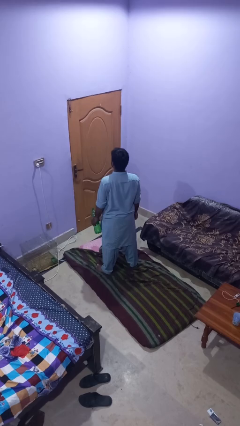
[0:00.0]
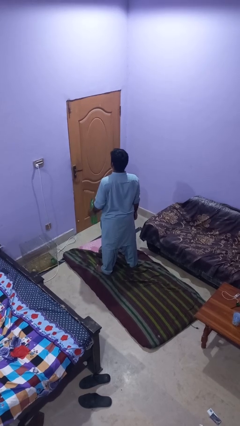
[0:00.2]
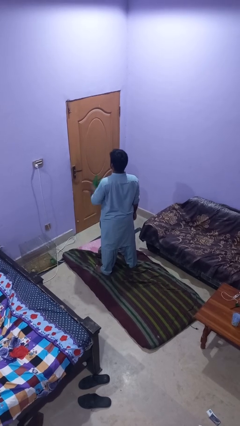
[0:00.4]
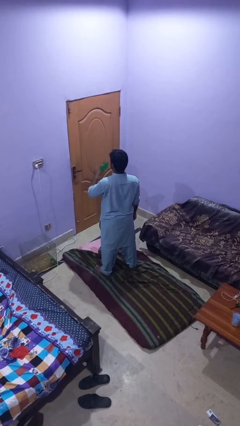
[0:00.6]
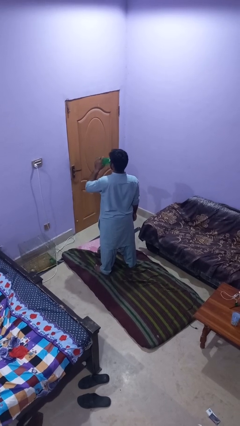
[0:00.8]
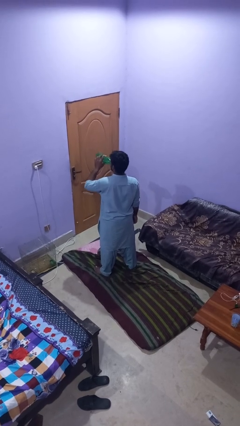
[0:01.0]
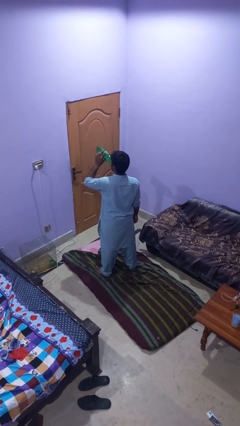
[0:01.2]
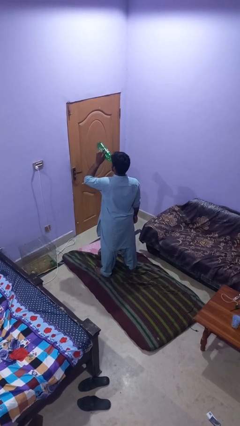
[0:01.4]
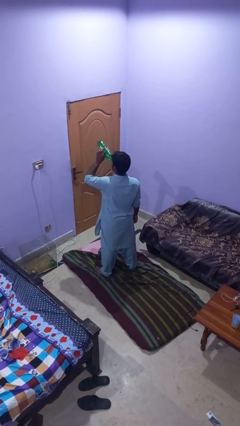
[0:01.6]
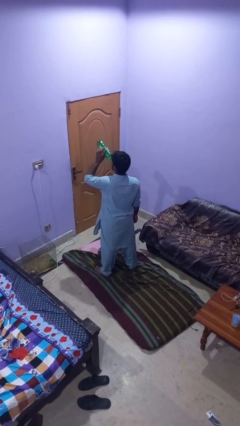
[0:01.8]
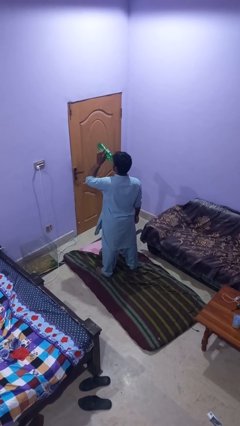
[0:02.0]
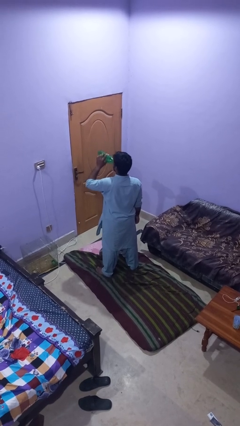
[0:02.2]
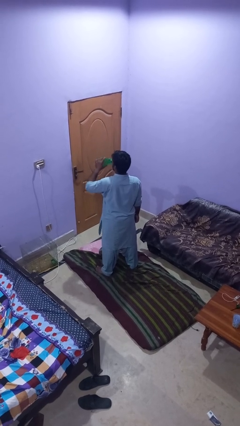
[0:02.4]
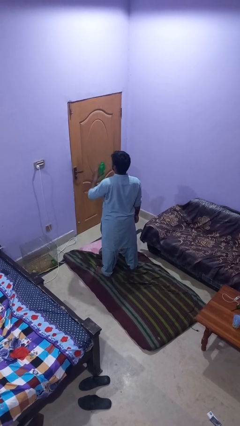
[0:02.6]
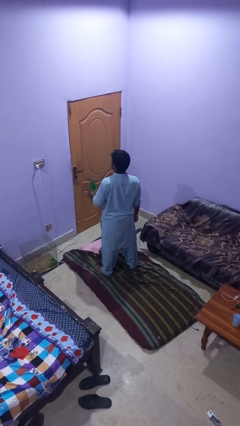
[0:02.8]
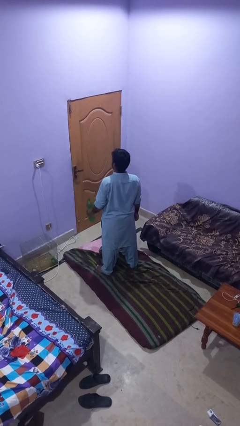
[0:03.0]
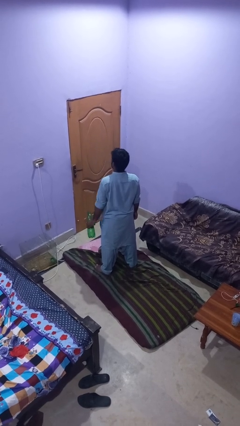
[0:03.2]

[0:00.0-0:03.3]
person drinks from bottle

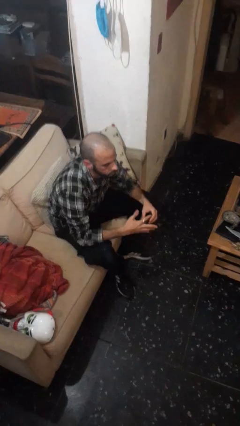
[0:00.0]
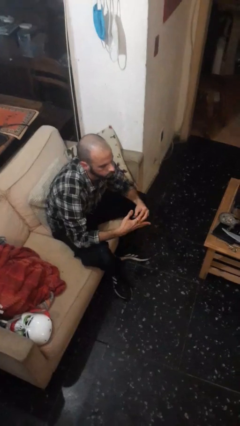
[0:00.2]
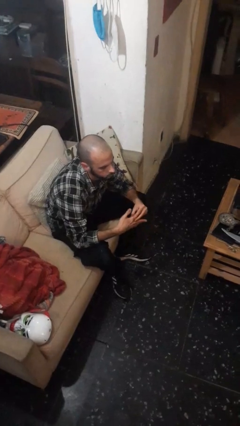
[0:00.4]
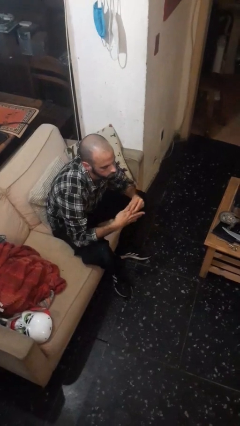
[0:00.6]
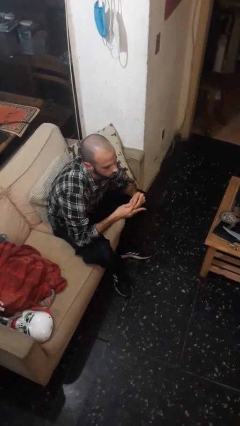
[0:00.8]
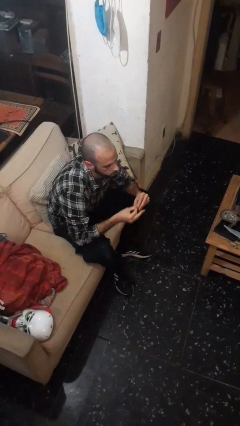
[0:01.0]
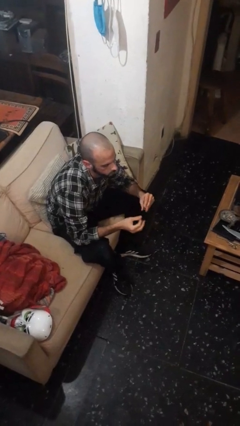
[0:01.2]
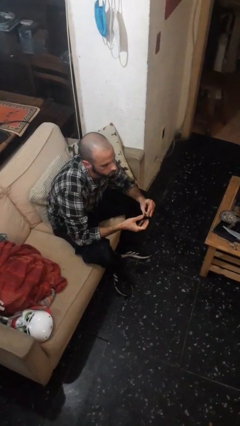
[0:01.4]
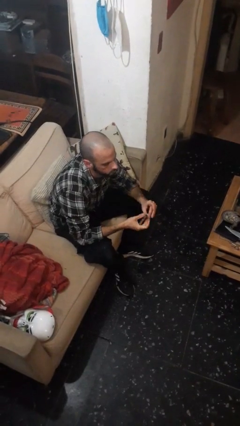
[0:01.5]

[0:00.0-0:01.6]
person takes off ring

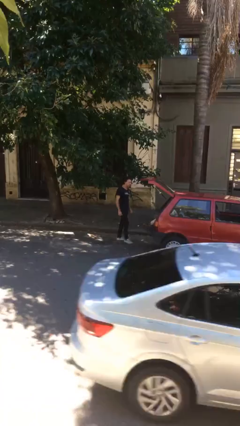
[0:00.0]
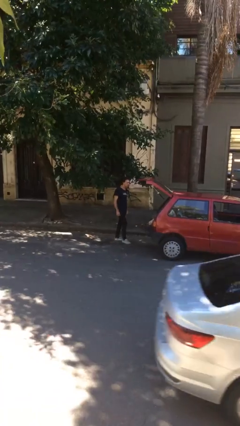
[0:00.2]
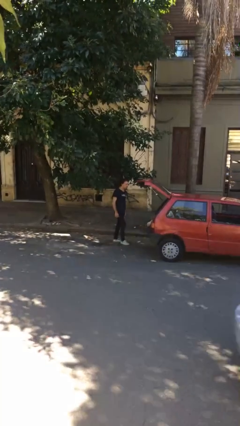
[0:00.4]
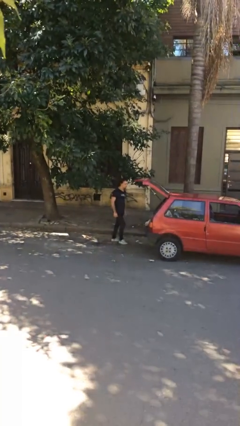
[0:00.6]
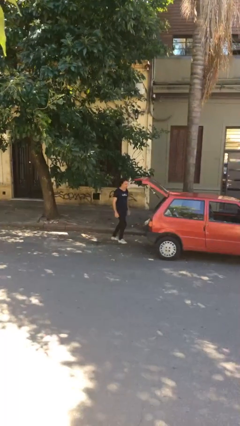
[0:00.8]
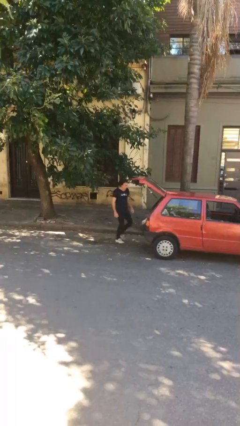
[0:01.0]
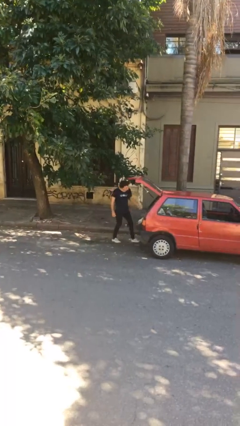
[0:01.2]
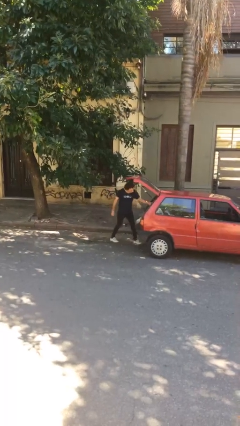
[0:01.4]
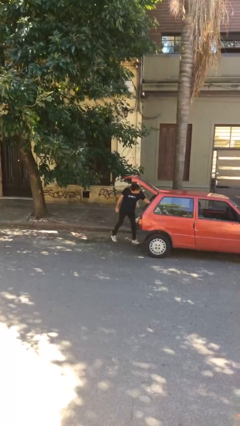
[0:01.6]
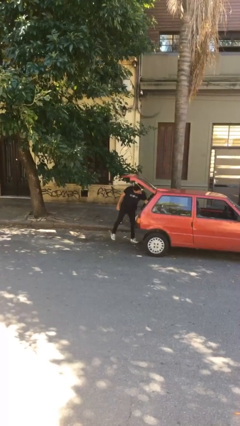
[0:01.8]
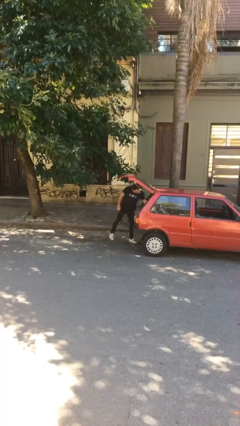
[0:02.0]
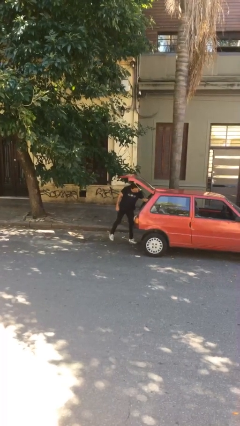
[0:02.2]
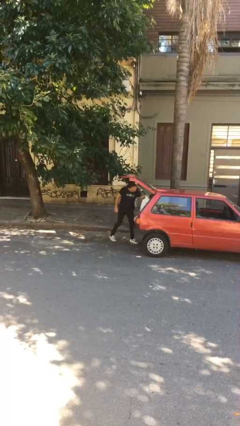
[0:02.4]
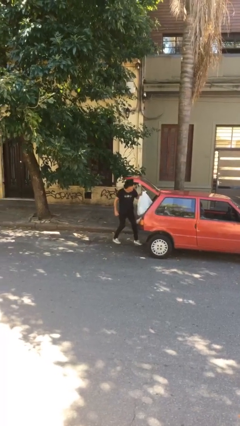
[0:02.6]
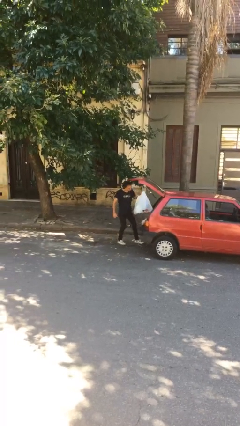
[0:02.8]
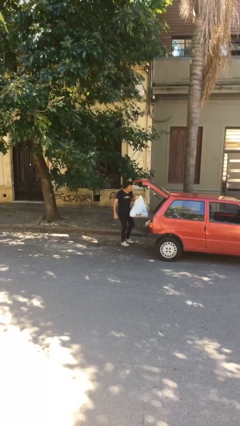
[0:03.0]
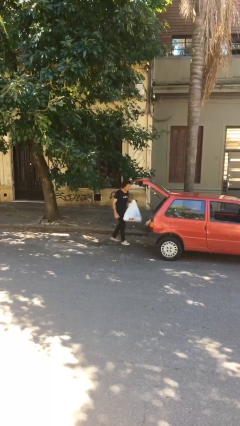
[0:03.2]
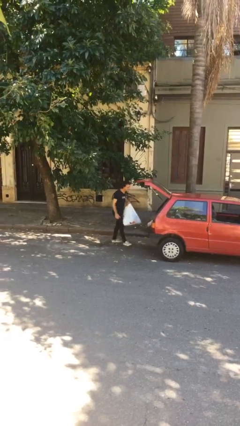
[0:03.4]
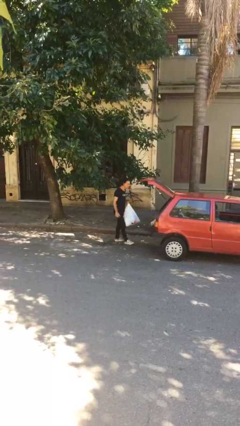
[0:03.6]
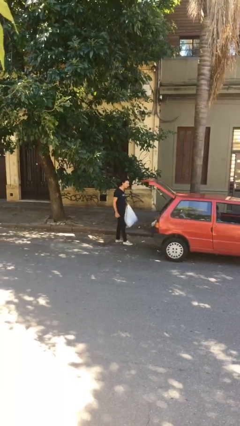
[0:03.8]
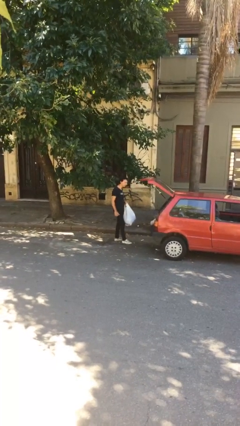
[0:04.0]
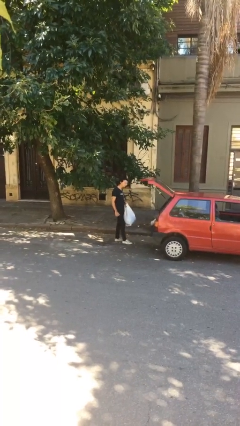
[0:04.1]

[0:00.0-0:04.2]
person unloads car

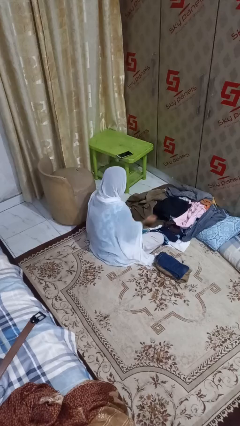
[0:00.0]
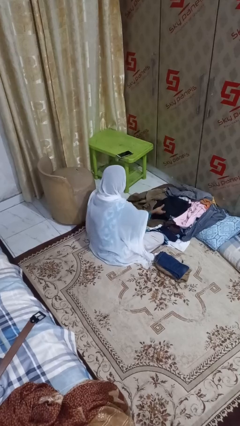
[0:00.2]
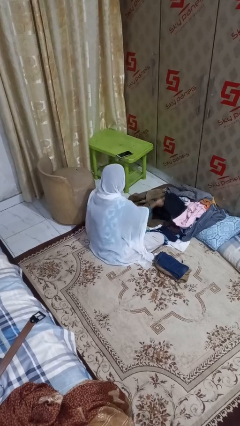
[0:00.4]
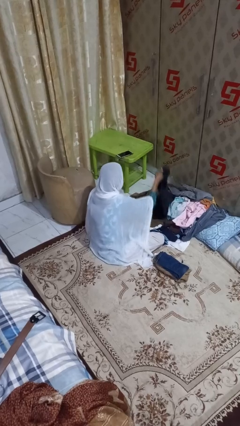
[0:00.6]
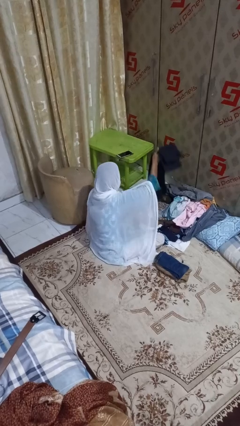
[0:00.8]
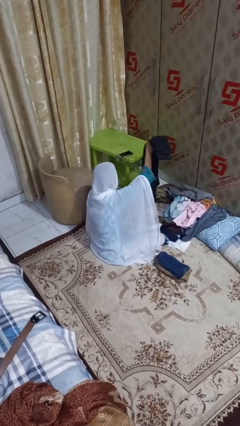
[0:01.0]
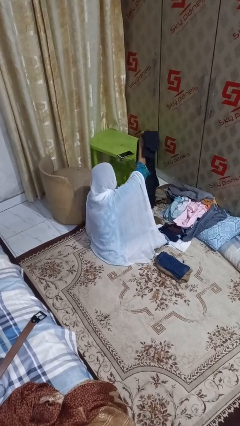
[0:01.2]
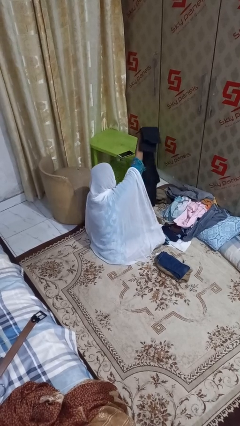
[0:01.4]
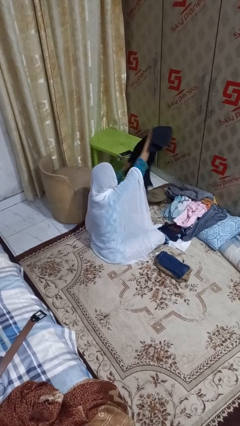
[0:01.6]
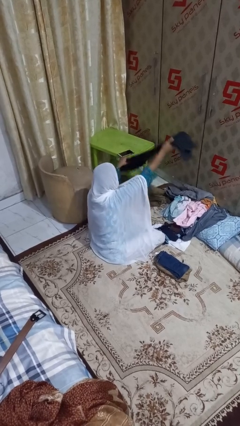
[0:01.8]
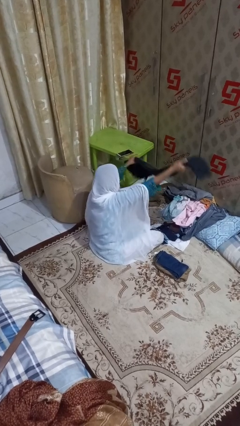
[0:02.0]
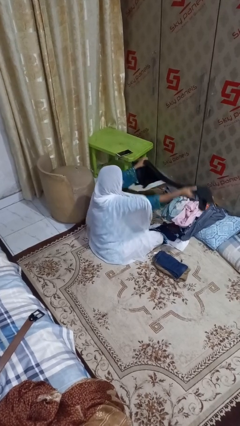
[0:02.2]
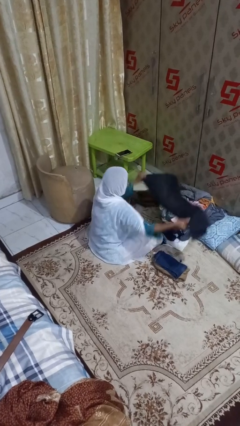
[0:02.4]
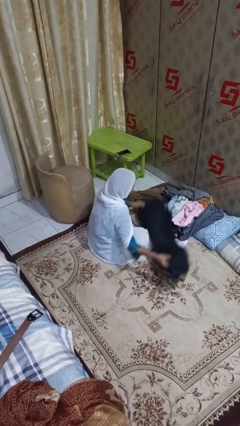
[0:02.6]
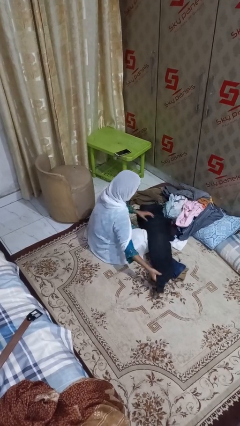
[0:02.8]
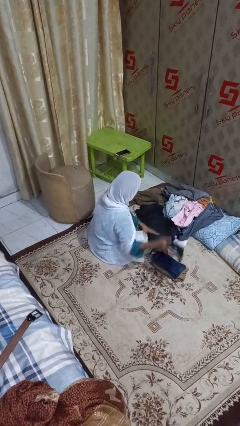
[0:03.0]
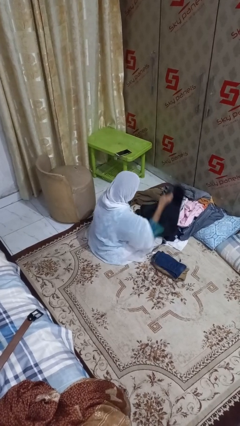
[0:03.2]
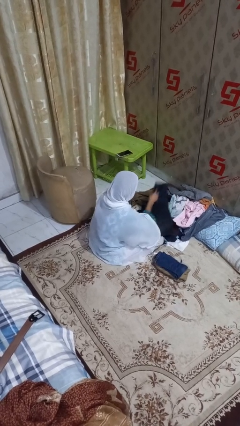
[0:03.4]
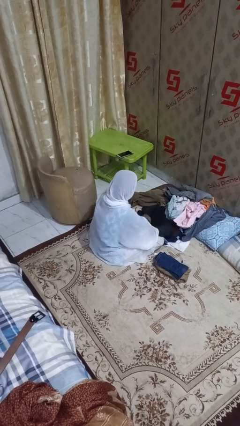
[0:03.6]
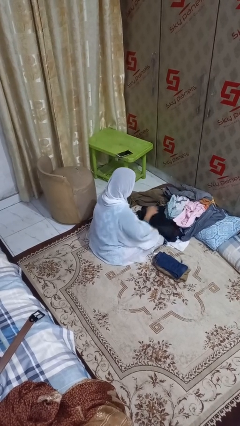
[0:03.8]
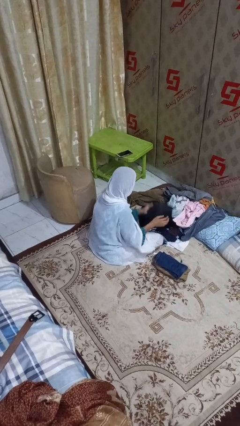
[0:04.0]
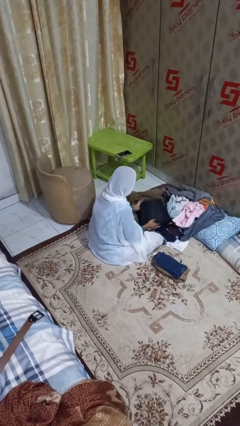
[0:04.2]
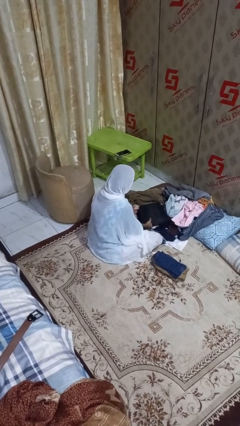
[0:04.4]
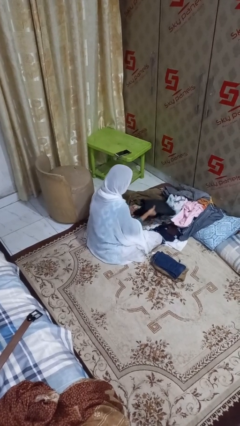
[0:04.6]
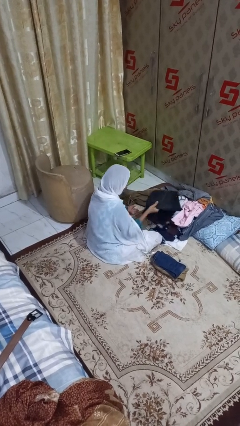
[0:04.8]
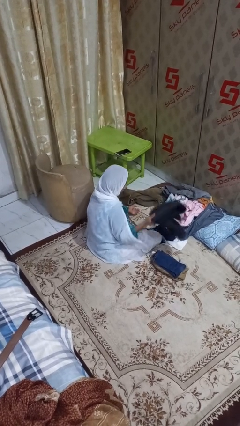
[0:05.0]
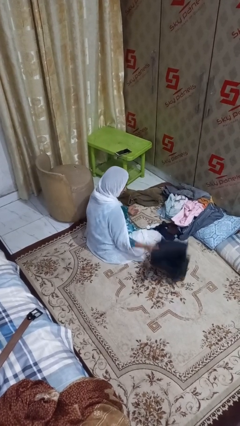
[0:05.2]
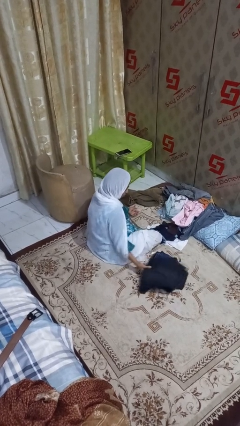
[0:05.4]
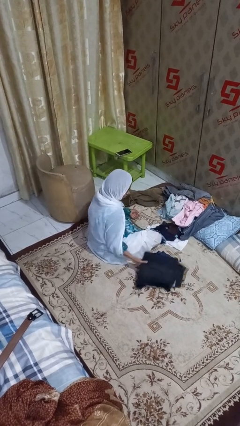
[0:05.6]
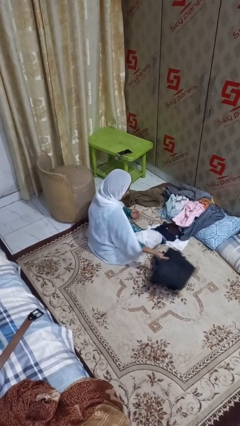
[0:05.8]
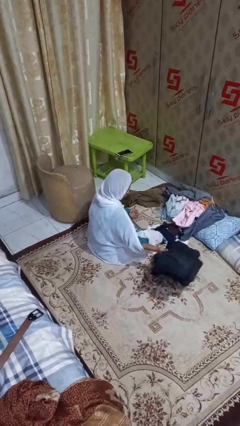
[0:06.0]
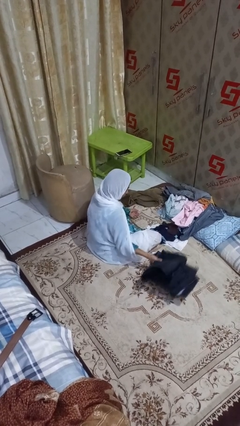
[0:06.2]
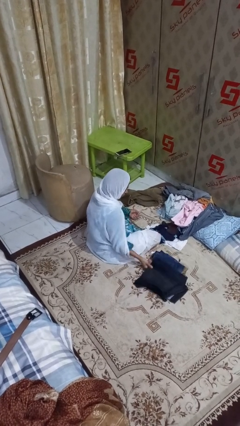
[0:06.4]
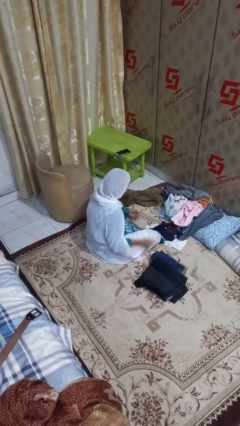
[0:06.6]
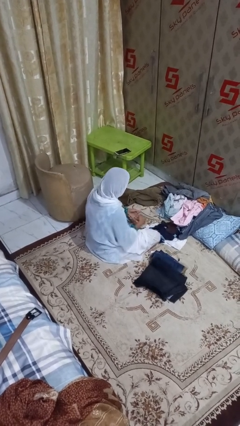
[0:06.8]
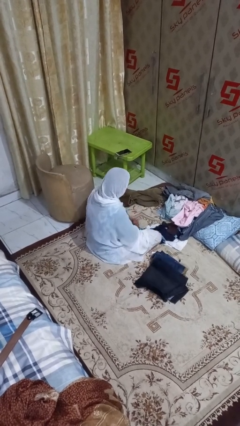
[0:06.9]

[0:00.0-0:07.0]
person folds pants

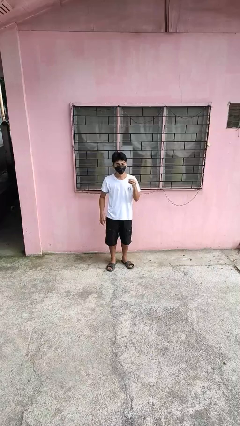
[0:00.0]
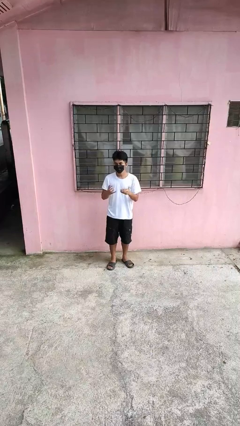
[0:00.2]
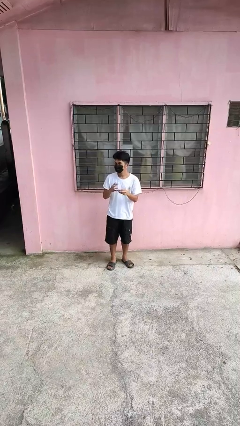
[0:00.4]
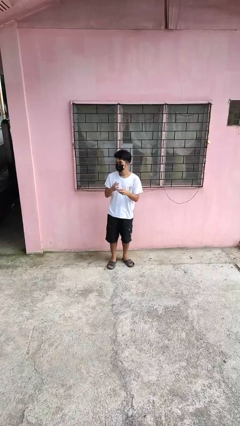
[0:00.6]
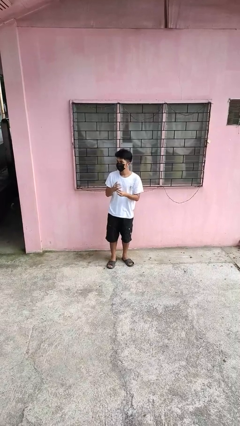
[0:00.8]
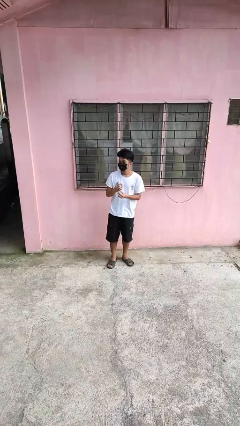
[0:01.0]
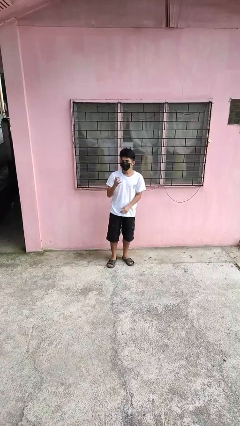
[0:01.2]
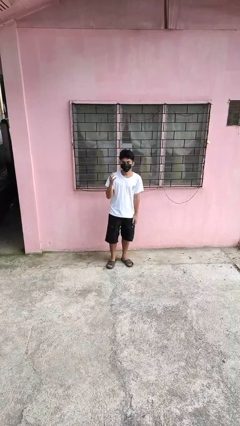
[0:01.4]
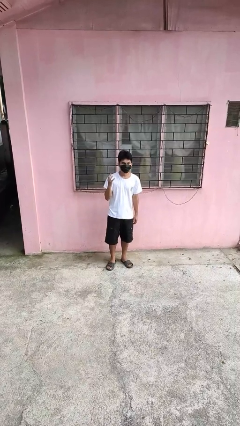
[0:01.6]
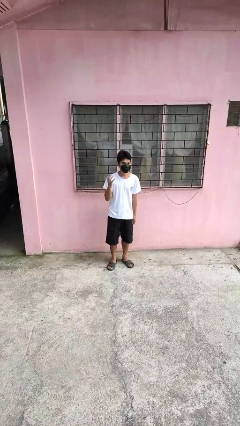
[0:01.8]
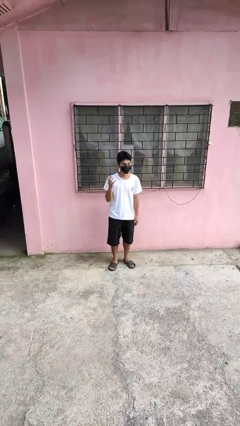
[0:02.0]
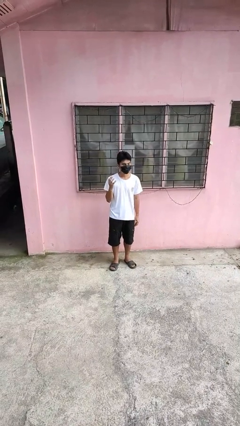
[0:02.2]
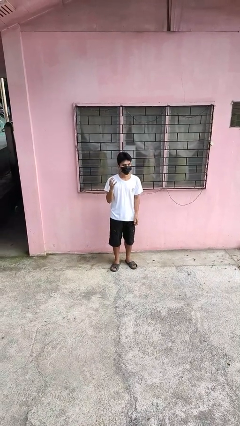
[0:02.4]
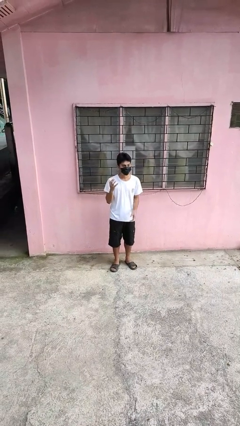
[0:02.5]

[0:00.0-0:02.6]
person puts on ring
